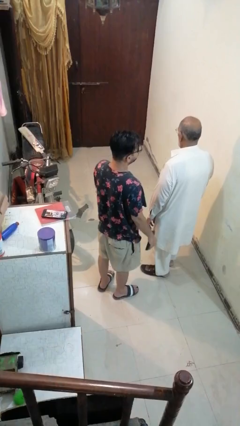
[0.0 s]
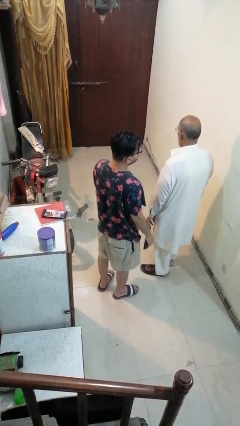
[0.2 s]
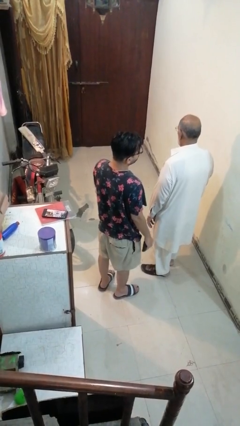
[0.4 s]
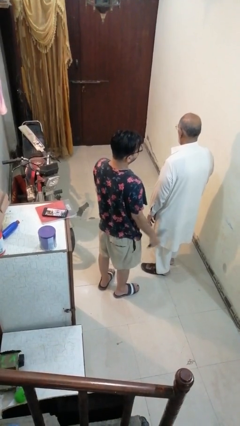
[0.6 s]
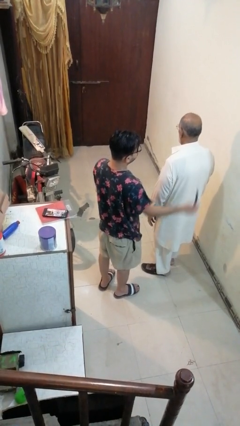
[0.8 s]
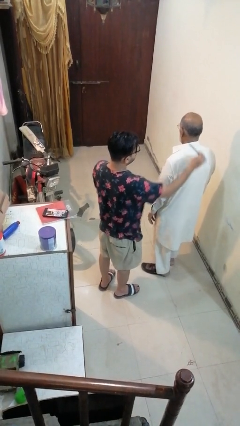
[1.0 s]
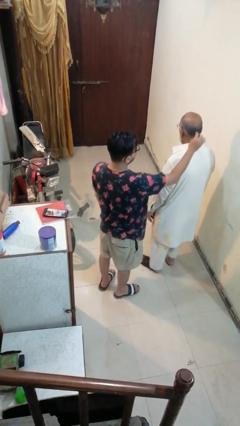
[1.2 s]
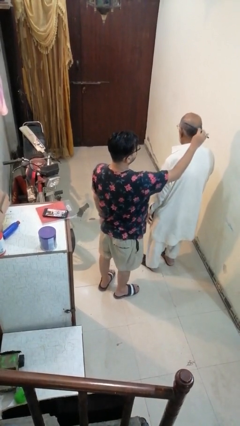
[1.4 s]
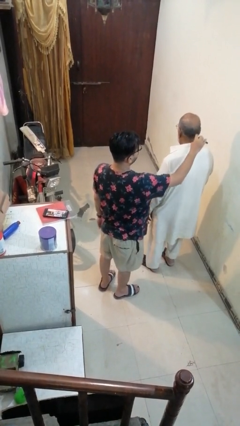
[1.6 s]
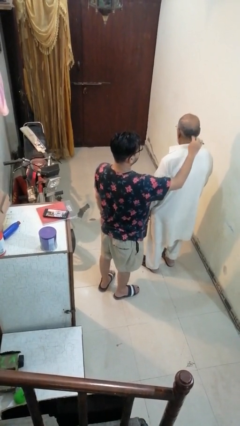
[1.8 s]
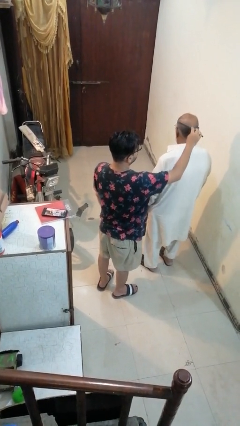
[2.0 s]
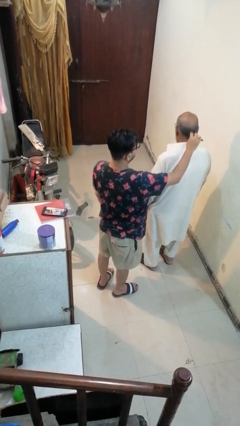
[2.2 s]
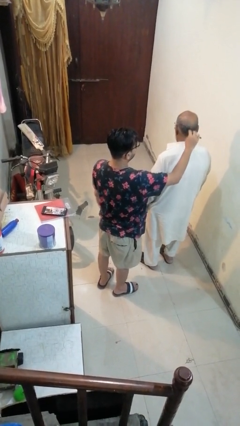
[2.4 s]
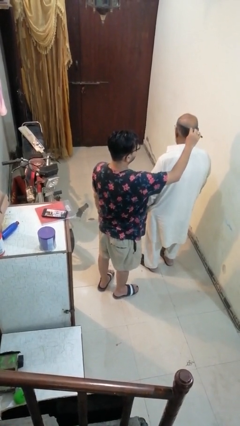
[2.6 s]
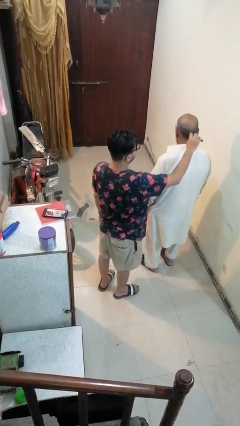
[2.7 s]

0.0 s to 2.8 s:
person brushes hair of person

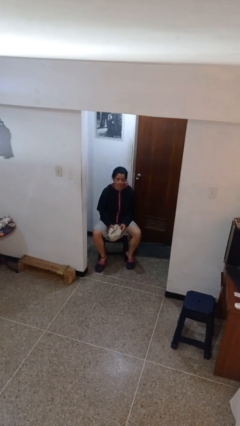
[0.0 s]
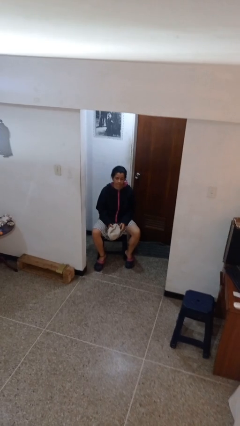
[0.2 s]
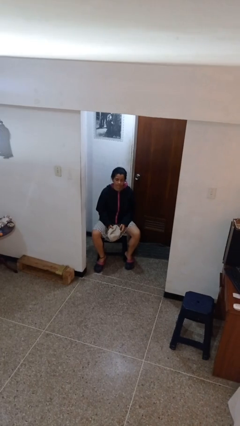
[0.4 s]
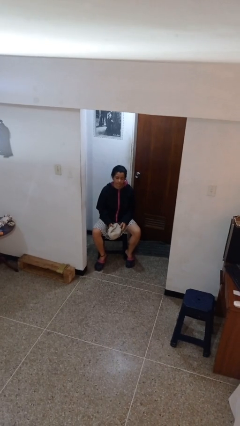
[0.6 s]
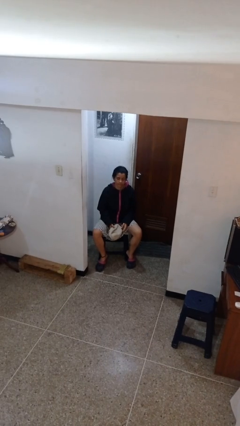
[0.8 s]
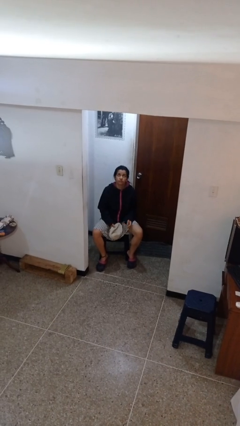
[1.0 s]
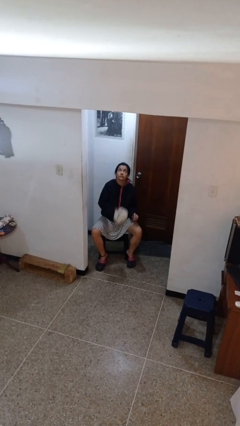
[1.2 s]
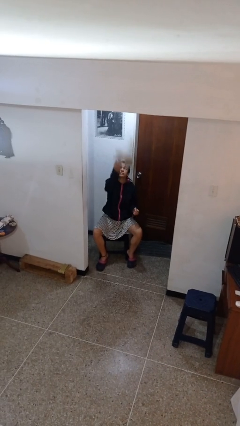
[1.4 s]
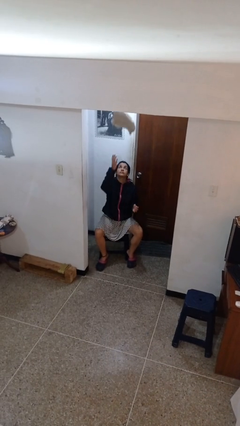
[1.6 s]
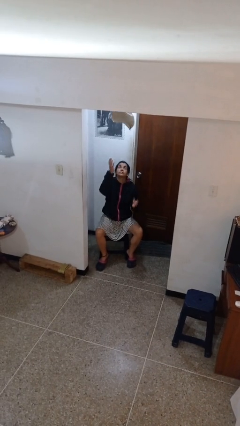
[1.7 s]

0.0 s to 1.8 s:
person drops object

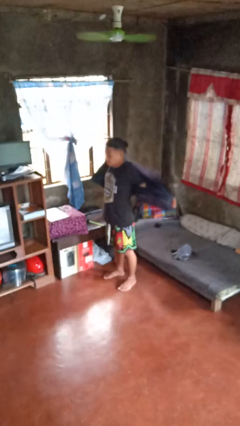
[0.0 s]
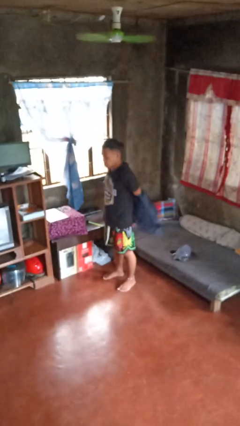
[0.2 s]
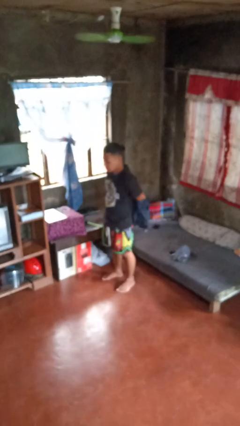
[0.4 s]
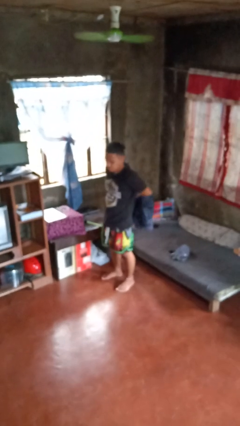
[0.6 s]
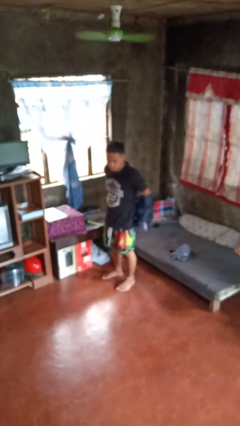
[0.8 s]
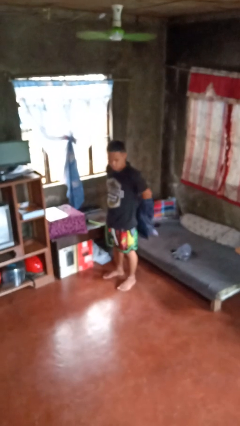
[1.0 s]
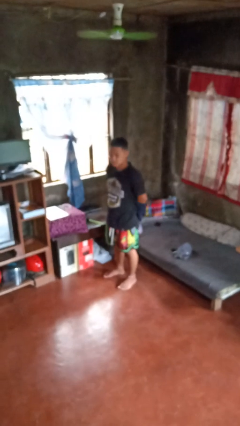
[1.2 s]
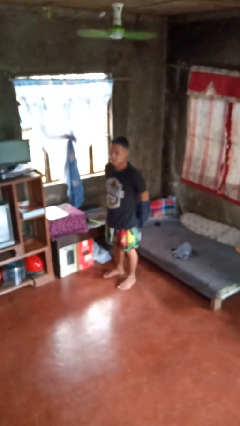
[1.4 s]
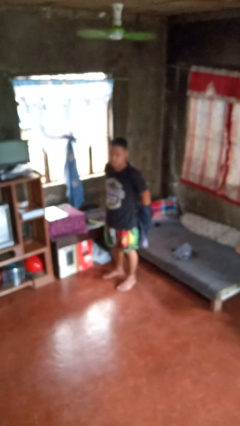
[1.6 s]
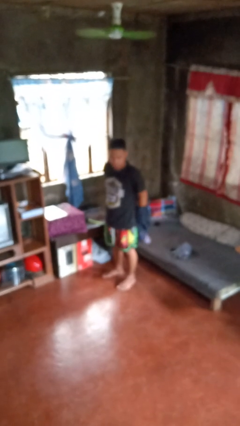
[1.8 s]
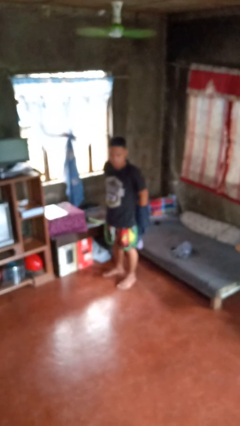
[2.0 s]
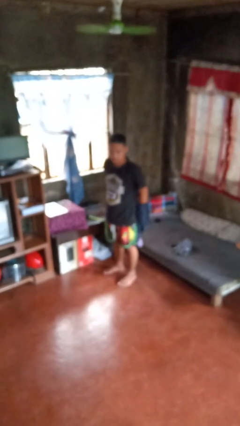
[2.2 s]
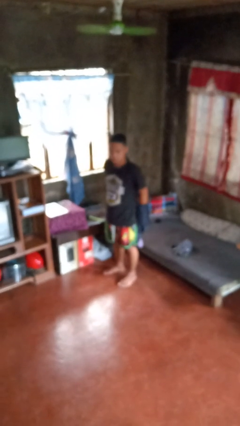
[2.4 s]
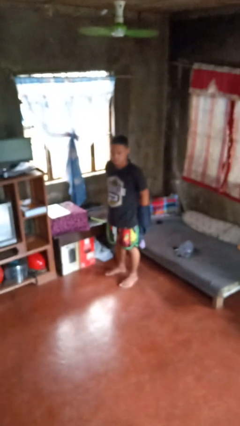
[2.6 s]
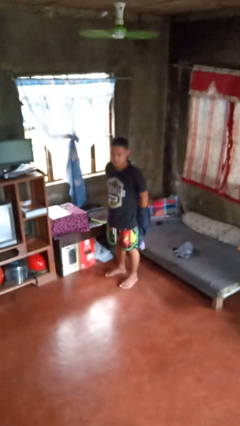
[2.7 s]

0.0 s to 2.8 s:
person takes off jacket

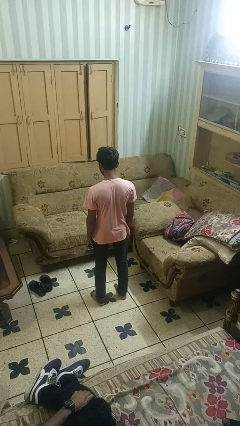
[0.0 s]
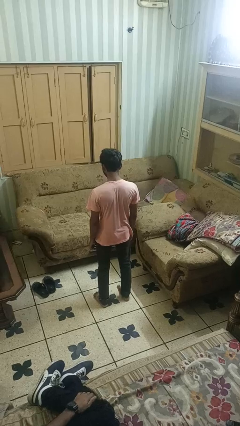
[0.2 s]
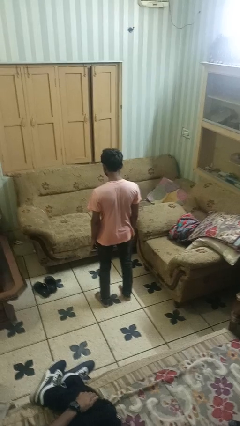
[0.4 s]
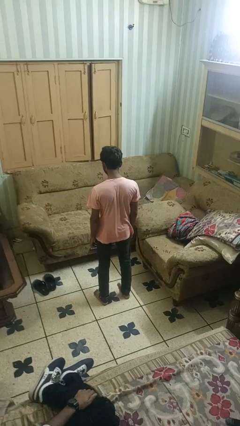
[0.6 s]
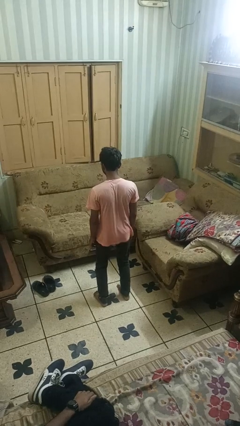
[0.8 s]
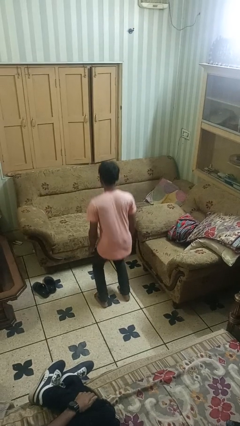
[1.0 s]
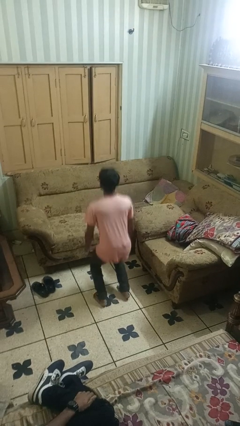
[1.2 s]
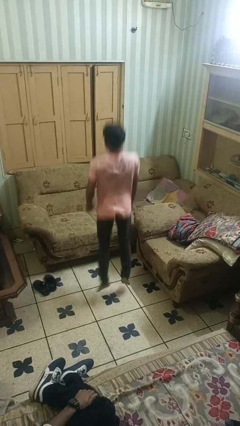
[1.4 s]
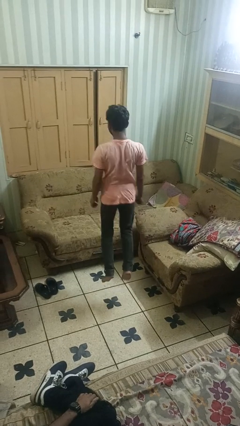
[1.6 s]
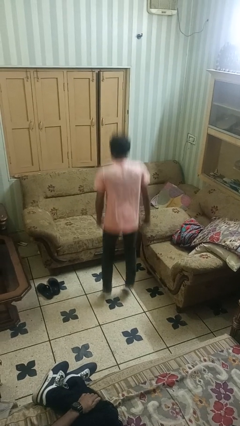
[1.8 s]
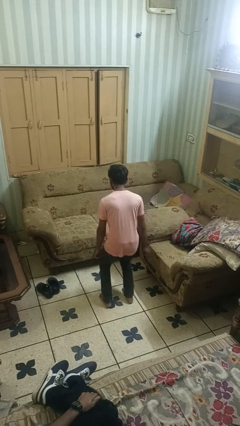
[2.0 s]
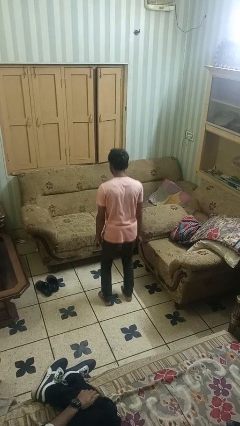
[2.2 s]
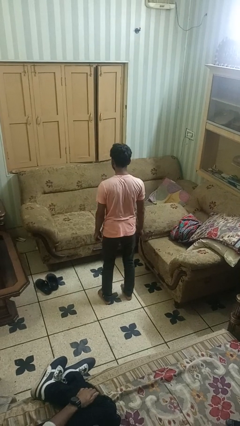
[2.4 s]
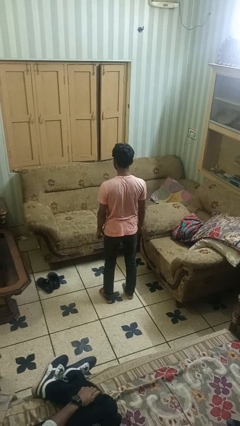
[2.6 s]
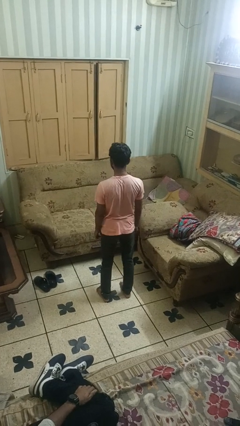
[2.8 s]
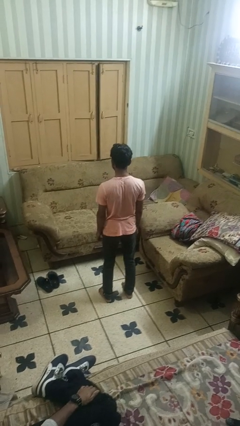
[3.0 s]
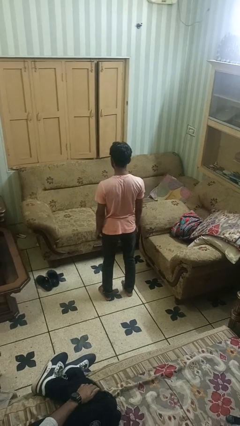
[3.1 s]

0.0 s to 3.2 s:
person jumps

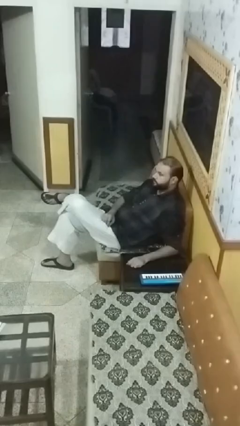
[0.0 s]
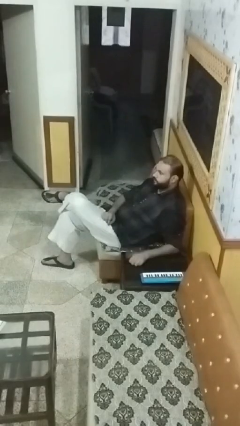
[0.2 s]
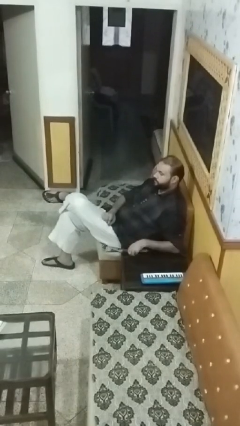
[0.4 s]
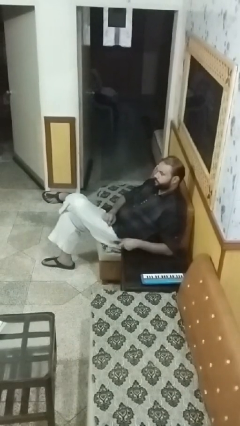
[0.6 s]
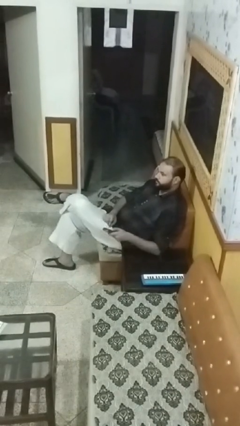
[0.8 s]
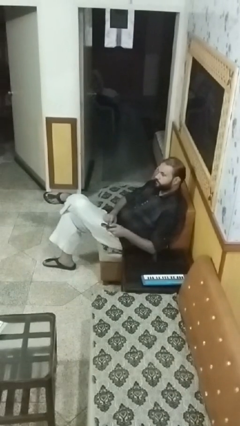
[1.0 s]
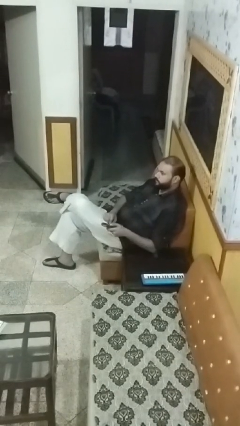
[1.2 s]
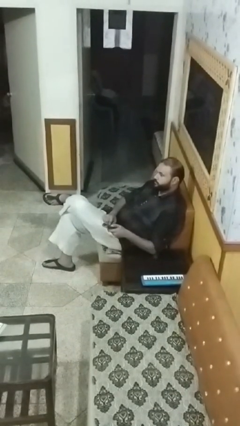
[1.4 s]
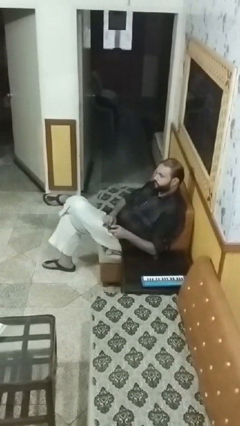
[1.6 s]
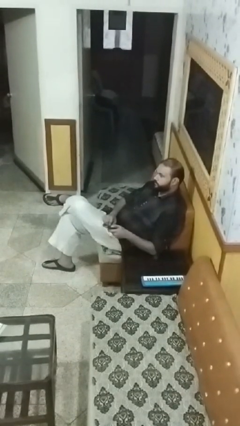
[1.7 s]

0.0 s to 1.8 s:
person uses television remote

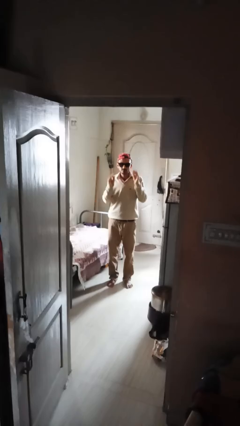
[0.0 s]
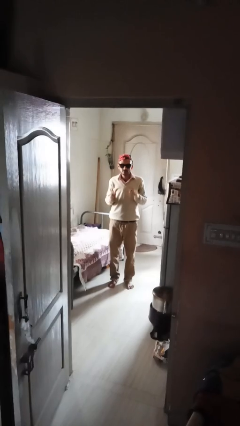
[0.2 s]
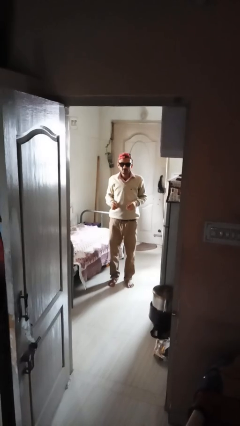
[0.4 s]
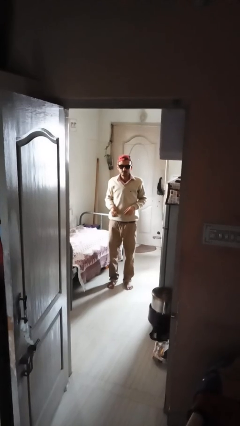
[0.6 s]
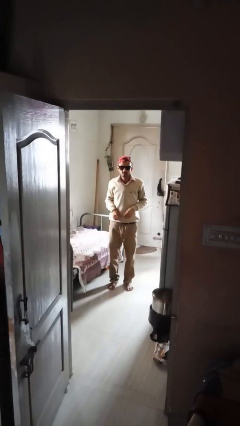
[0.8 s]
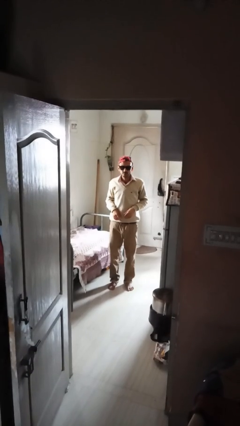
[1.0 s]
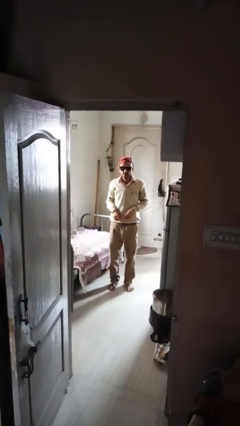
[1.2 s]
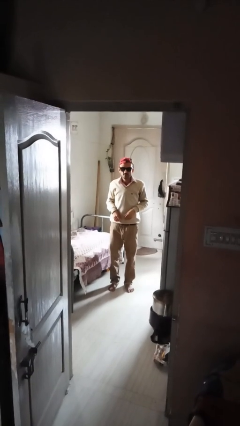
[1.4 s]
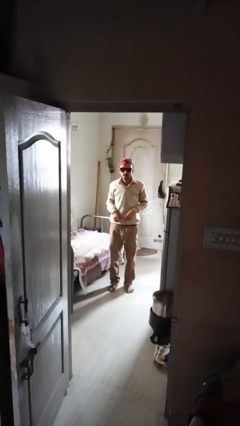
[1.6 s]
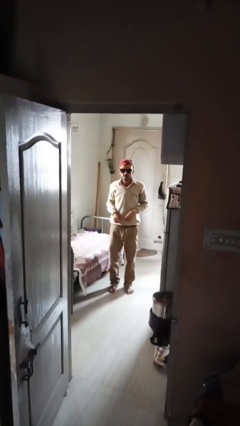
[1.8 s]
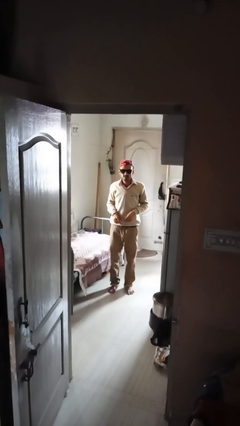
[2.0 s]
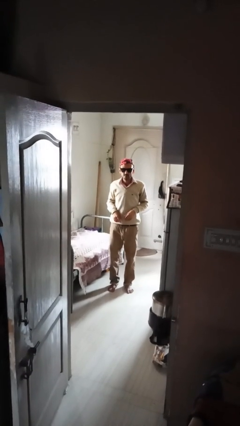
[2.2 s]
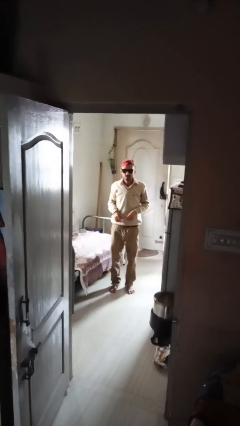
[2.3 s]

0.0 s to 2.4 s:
person puts on sunglasses

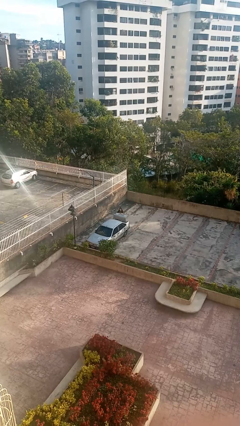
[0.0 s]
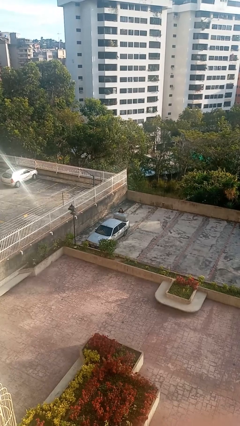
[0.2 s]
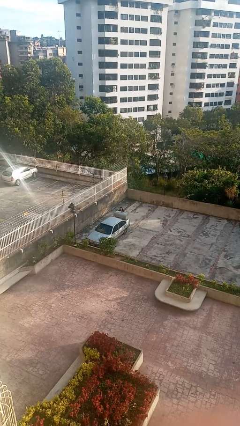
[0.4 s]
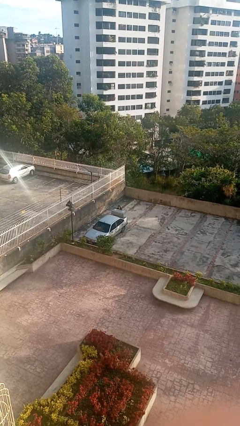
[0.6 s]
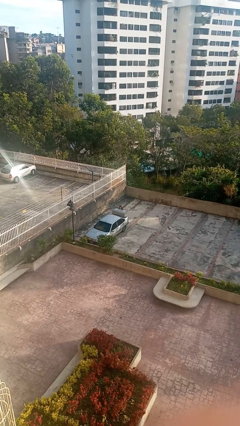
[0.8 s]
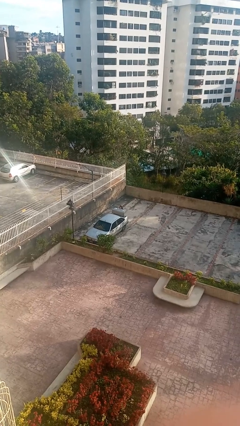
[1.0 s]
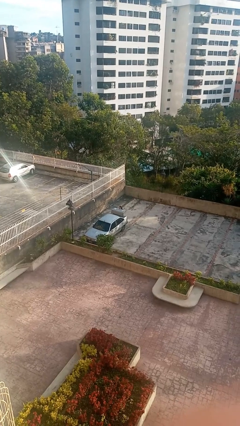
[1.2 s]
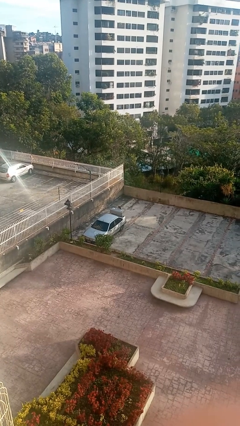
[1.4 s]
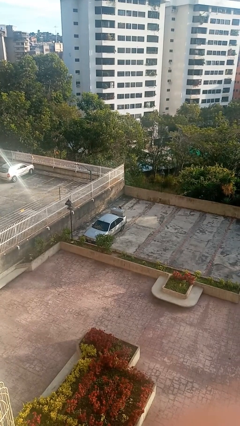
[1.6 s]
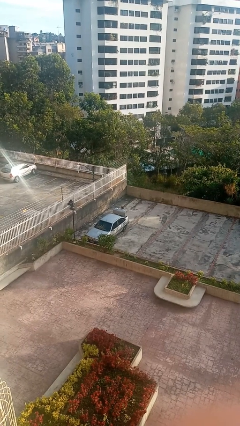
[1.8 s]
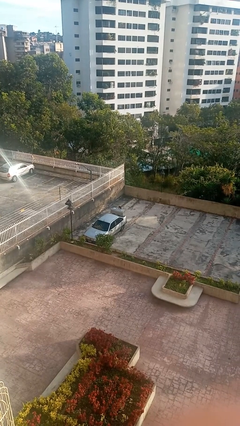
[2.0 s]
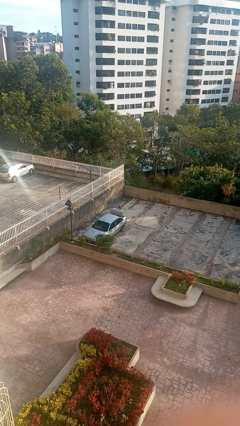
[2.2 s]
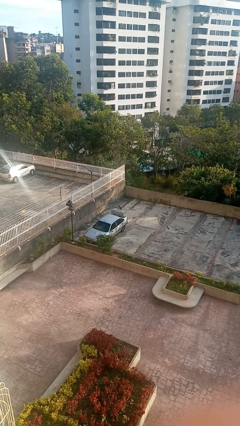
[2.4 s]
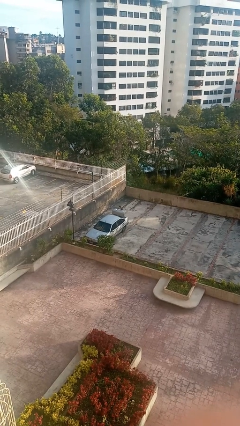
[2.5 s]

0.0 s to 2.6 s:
person loads car
